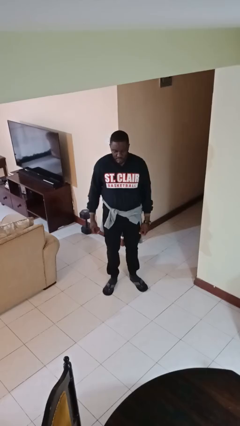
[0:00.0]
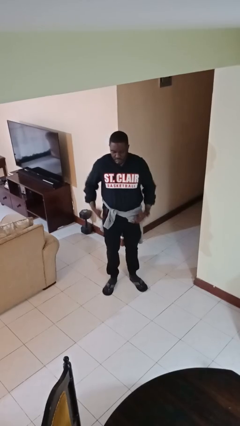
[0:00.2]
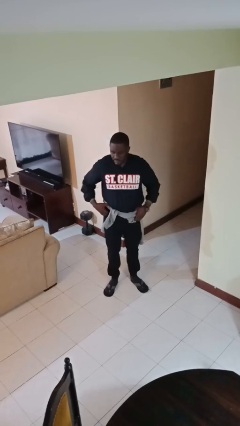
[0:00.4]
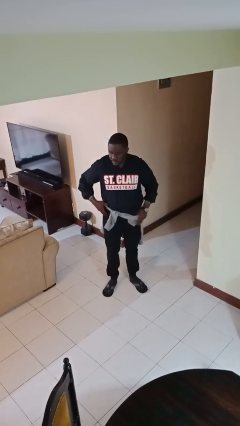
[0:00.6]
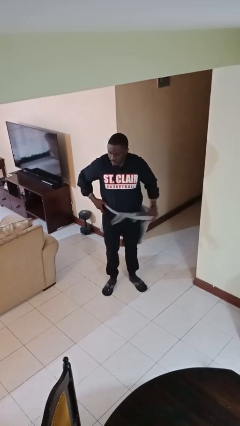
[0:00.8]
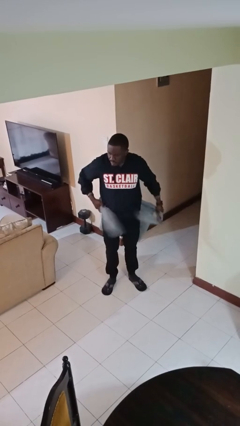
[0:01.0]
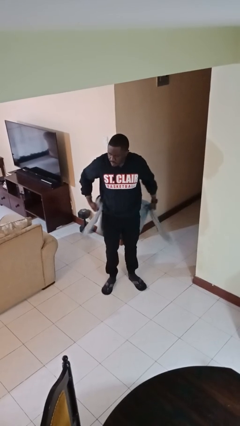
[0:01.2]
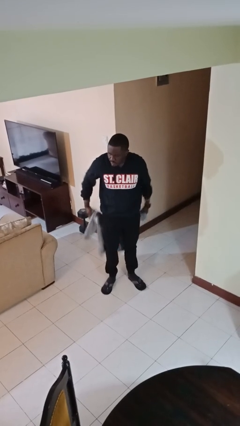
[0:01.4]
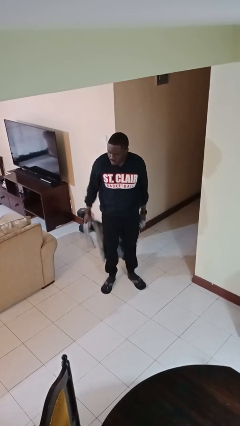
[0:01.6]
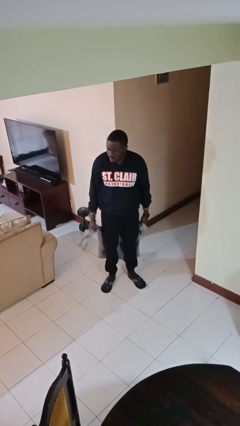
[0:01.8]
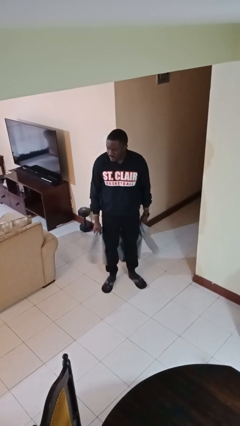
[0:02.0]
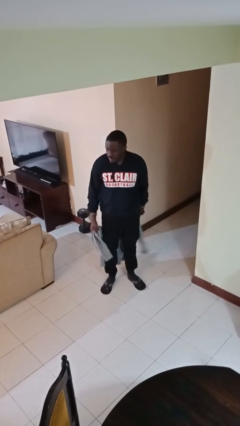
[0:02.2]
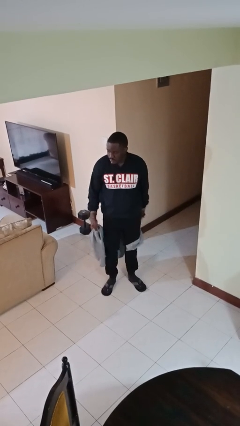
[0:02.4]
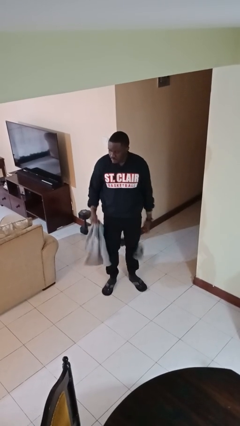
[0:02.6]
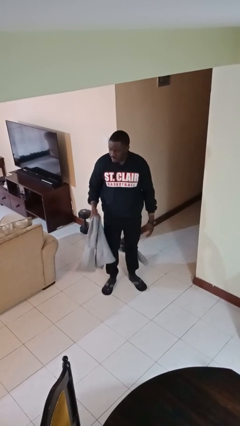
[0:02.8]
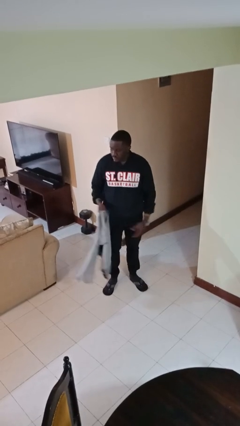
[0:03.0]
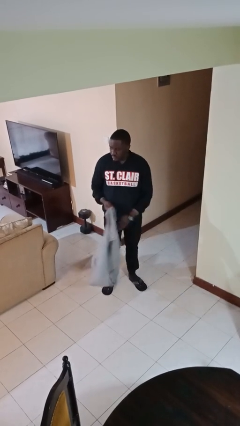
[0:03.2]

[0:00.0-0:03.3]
person unties jacket around waist

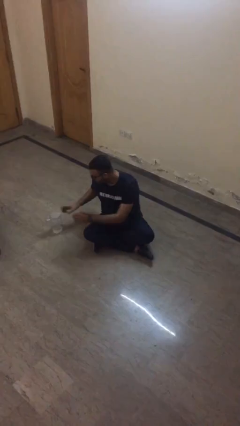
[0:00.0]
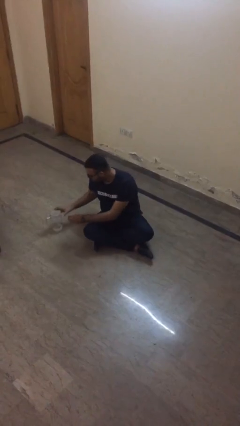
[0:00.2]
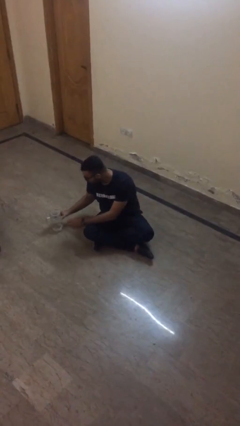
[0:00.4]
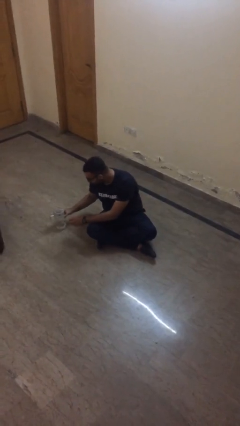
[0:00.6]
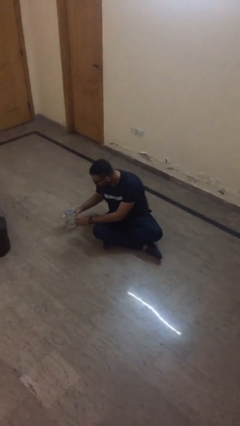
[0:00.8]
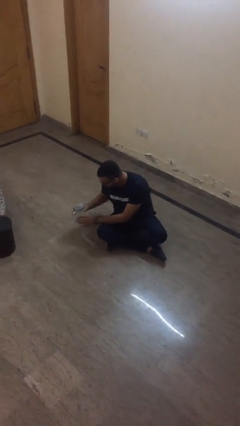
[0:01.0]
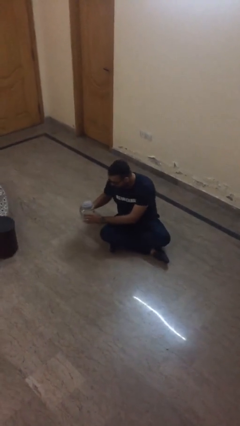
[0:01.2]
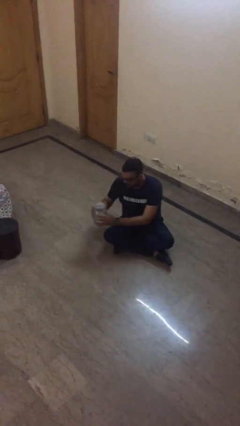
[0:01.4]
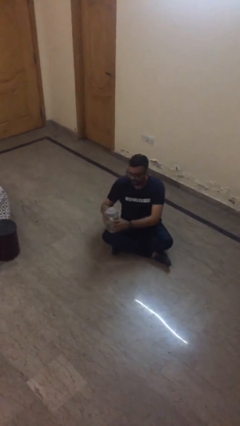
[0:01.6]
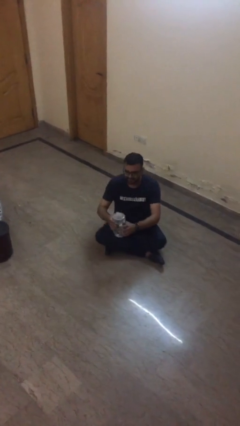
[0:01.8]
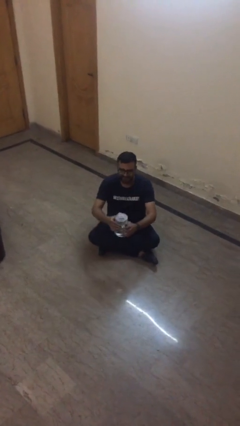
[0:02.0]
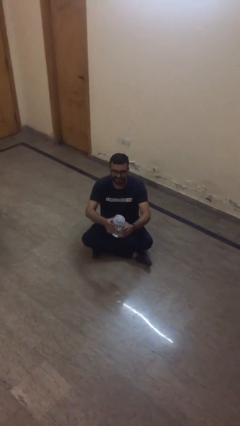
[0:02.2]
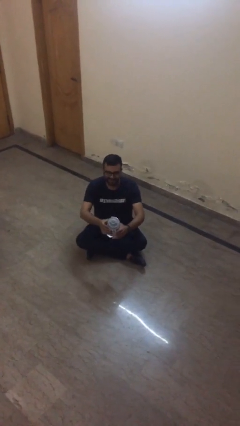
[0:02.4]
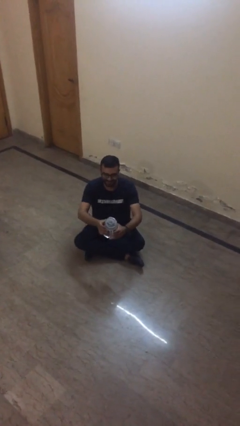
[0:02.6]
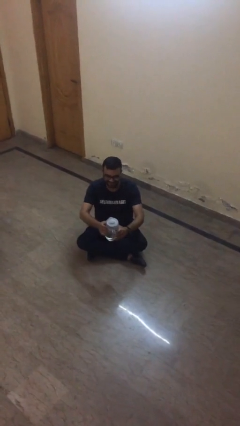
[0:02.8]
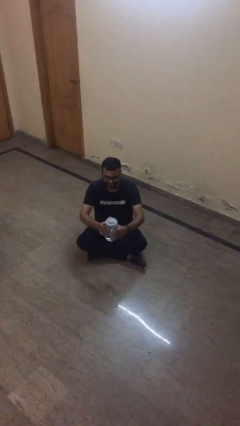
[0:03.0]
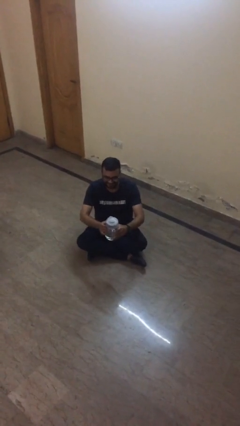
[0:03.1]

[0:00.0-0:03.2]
person picks up object from floor

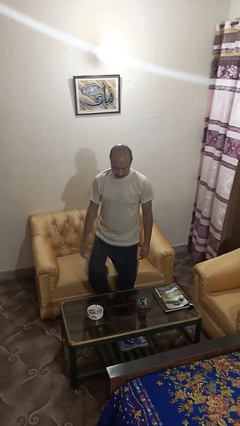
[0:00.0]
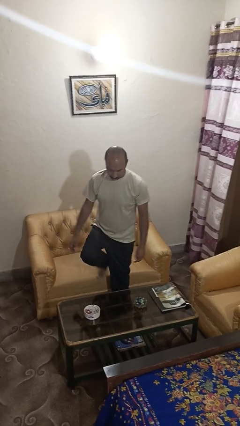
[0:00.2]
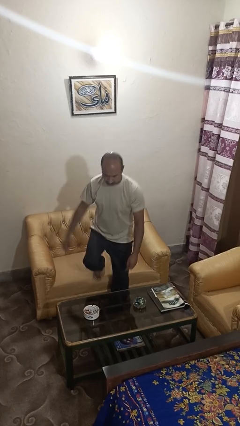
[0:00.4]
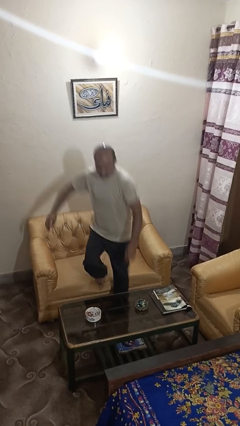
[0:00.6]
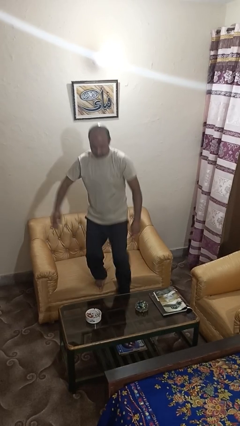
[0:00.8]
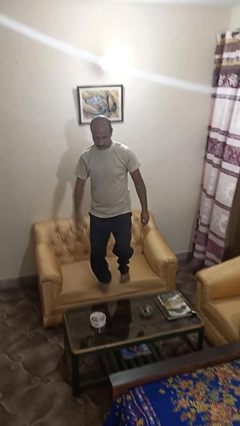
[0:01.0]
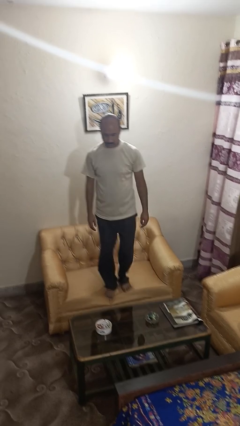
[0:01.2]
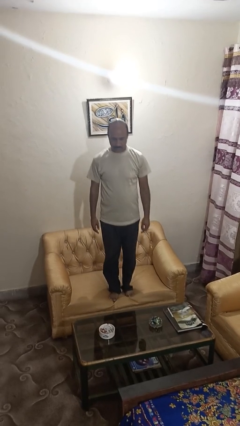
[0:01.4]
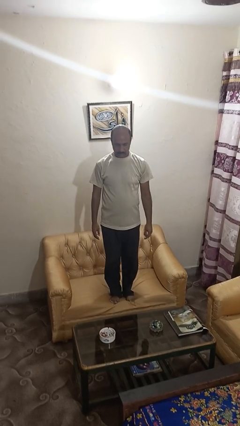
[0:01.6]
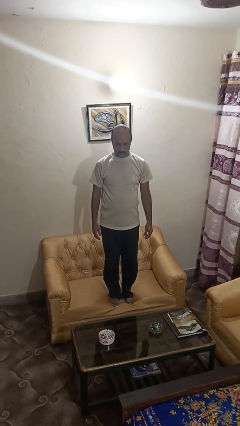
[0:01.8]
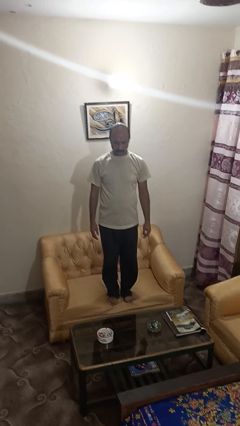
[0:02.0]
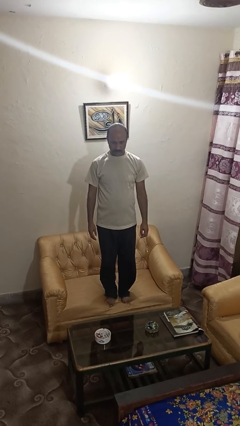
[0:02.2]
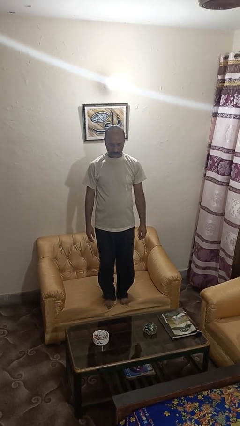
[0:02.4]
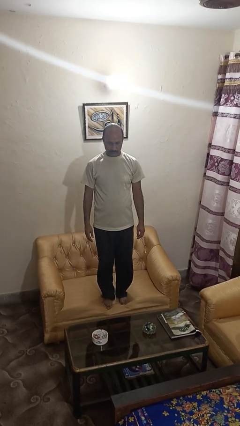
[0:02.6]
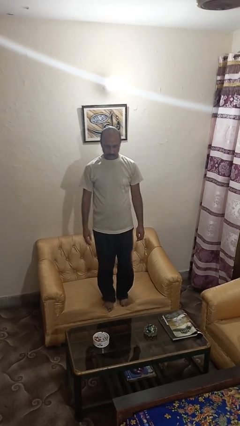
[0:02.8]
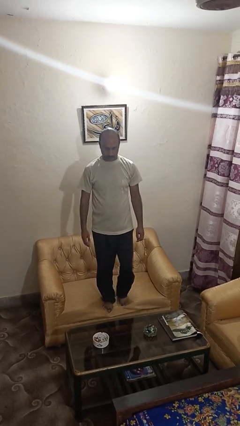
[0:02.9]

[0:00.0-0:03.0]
person climbs on couch

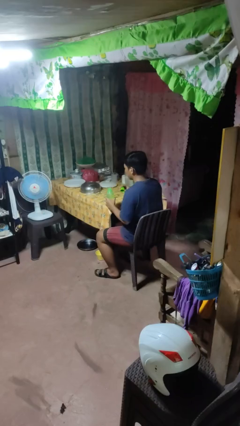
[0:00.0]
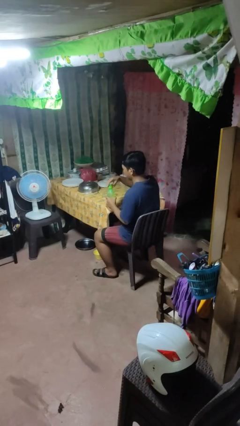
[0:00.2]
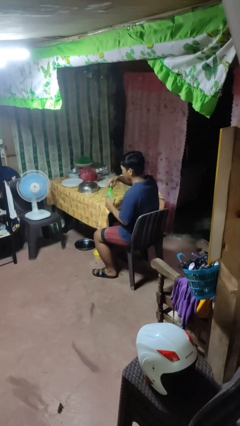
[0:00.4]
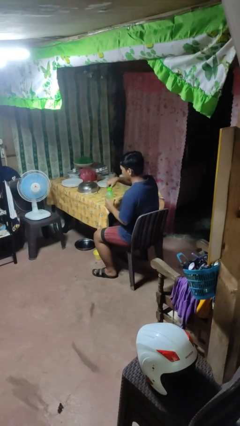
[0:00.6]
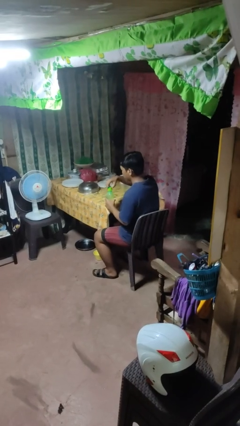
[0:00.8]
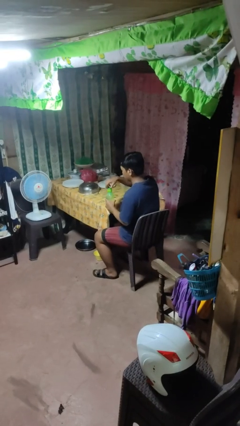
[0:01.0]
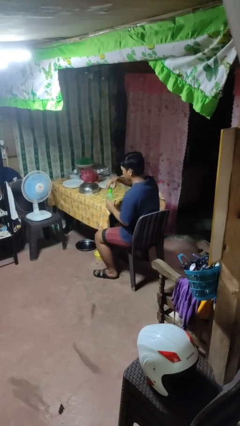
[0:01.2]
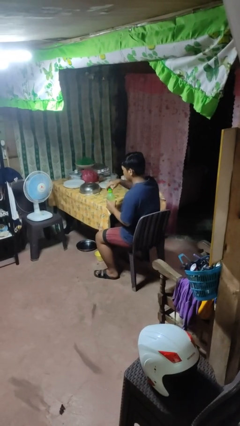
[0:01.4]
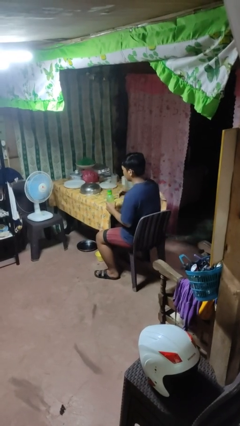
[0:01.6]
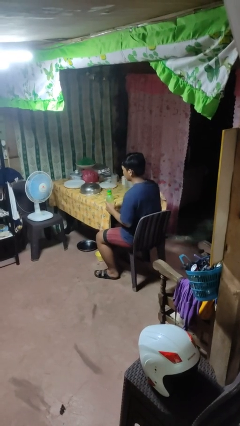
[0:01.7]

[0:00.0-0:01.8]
person screws lid to bottle

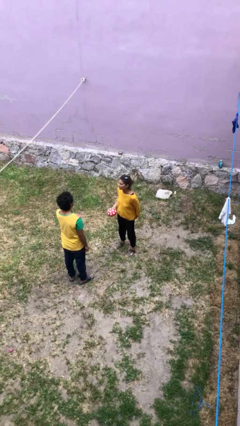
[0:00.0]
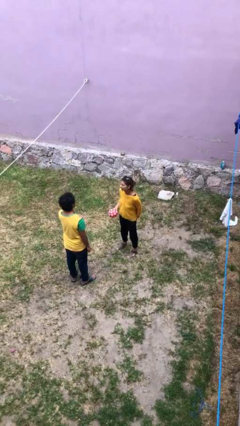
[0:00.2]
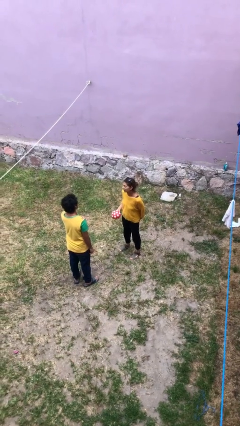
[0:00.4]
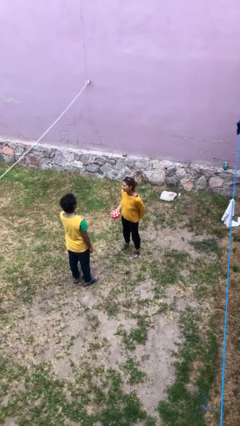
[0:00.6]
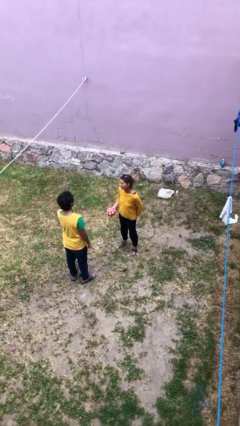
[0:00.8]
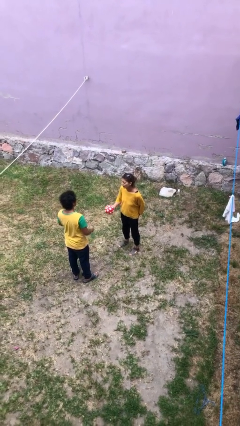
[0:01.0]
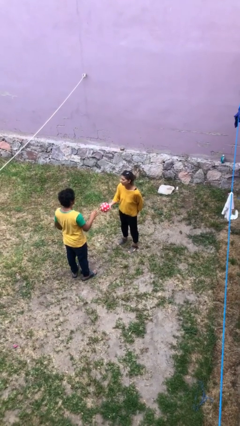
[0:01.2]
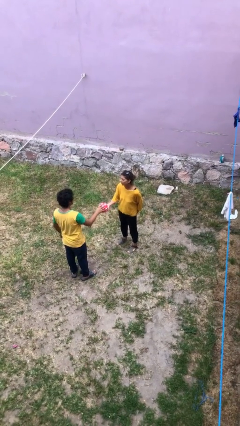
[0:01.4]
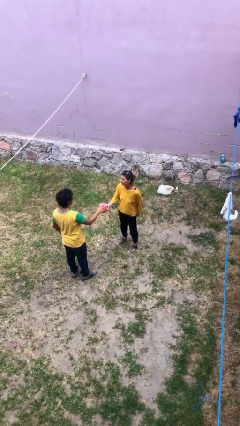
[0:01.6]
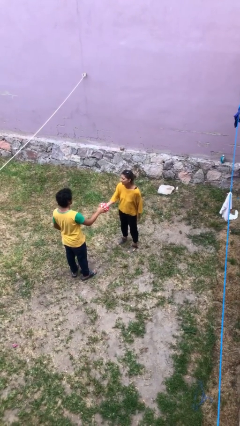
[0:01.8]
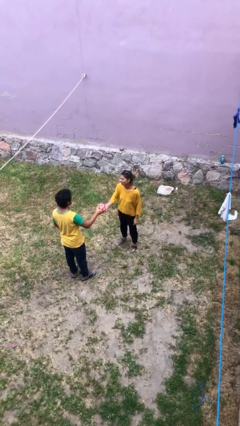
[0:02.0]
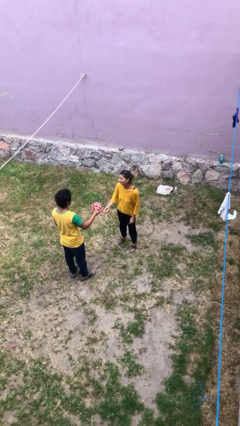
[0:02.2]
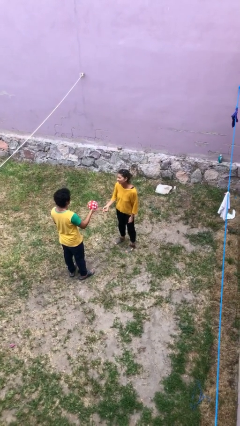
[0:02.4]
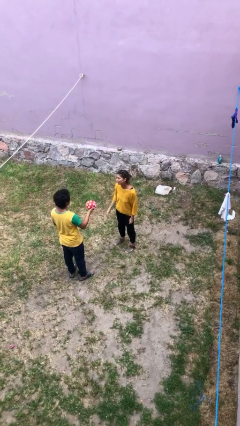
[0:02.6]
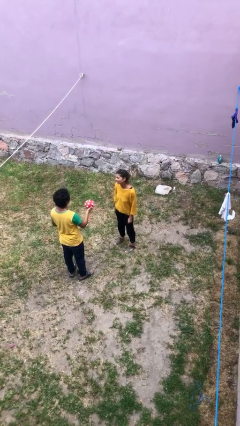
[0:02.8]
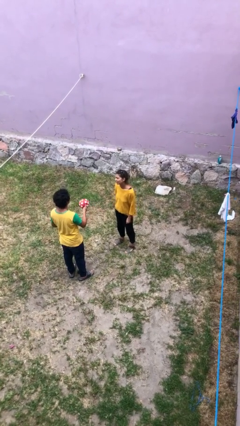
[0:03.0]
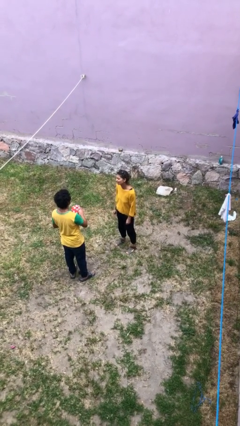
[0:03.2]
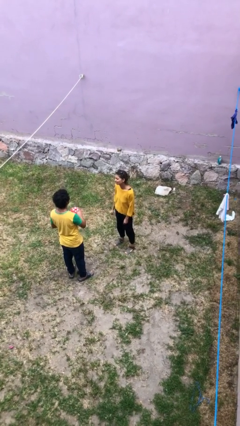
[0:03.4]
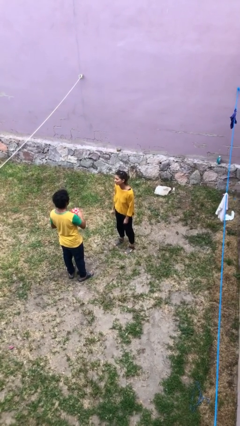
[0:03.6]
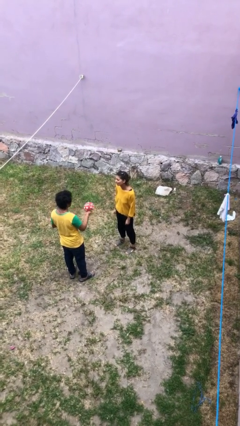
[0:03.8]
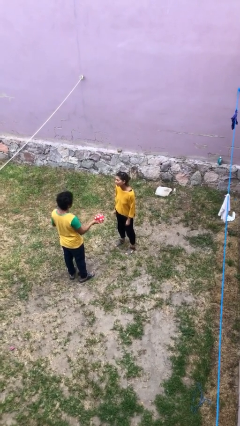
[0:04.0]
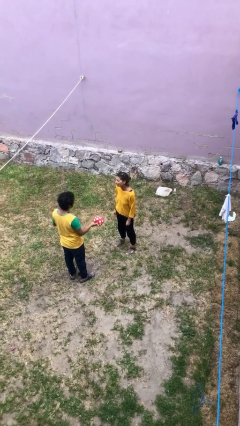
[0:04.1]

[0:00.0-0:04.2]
person transfers object to person

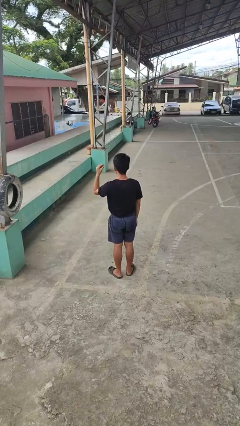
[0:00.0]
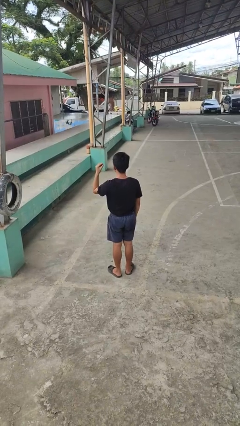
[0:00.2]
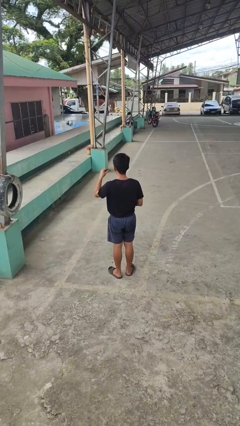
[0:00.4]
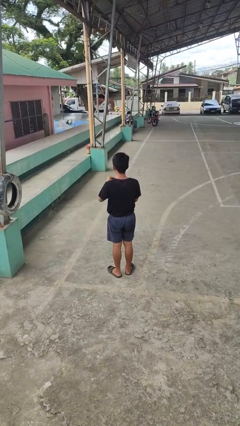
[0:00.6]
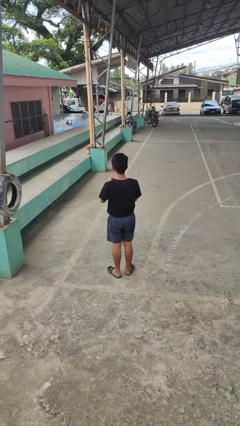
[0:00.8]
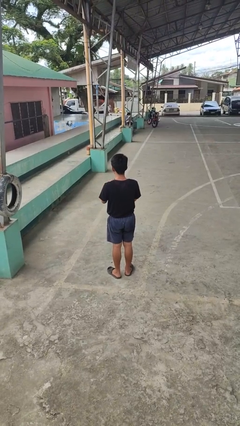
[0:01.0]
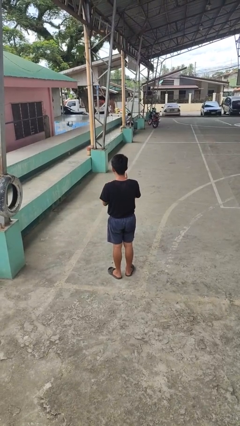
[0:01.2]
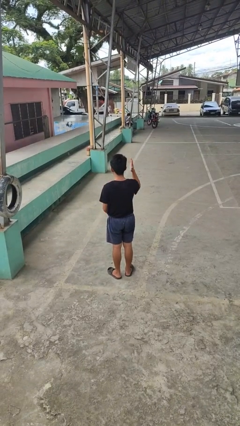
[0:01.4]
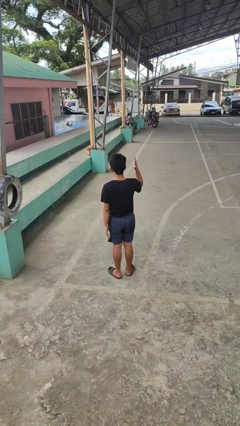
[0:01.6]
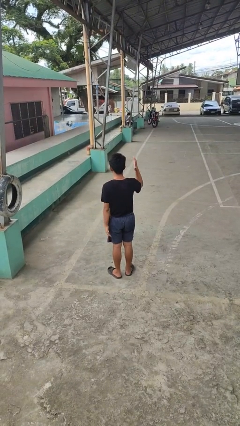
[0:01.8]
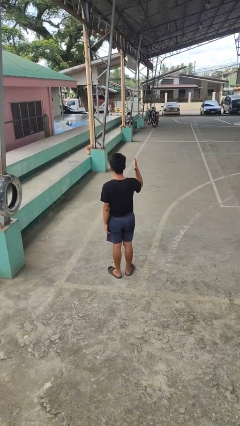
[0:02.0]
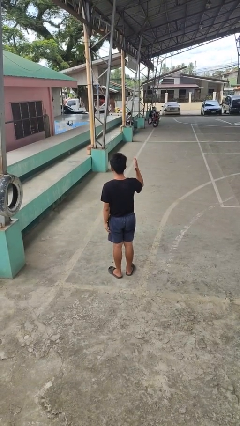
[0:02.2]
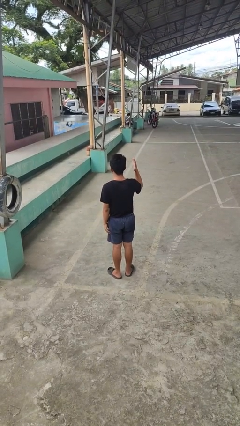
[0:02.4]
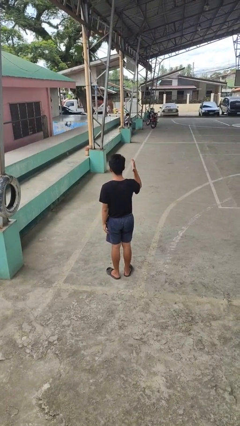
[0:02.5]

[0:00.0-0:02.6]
person puts on ring
